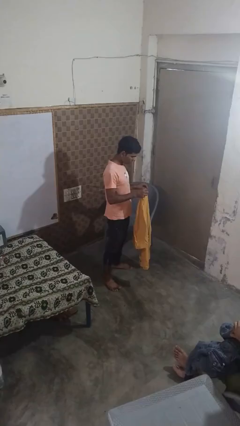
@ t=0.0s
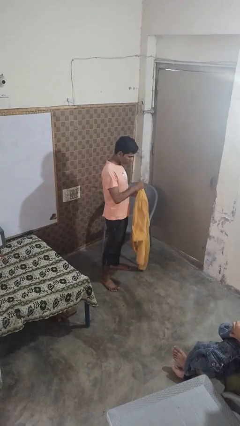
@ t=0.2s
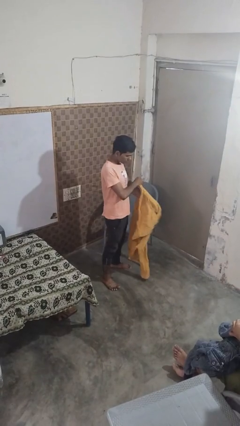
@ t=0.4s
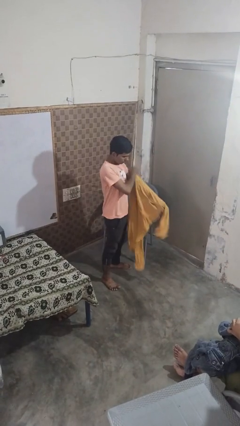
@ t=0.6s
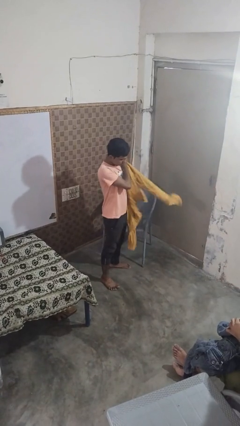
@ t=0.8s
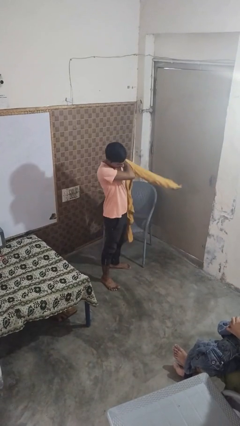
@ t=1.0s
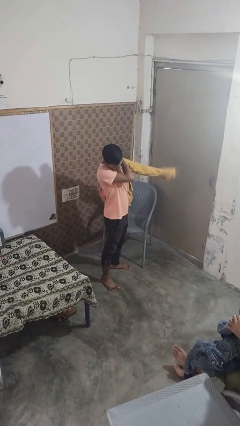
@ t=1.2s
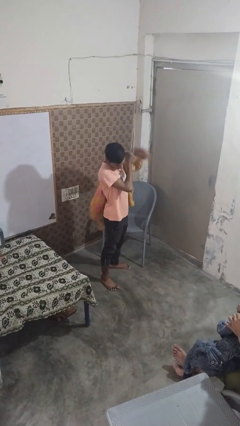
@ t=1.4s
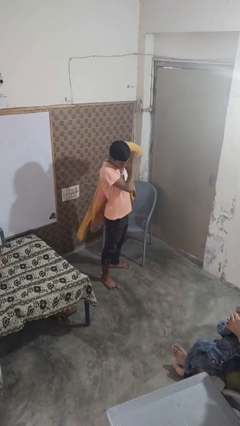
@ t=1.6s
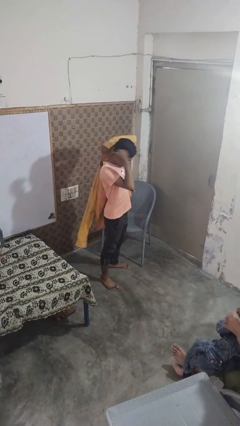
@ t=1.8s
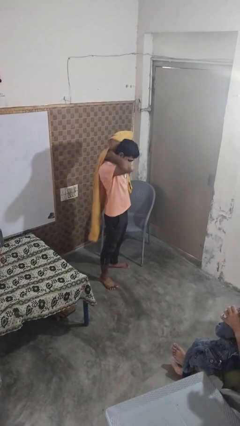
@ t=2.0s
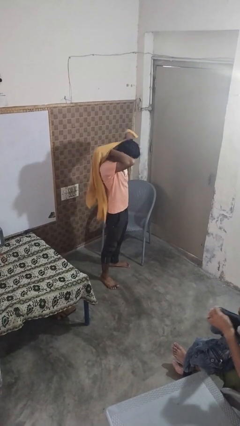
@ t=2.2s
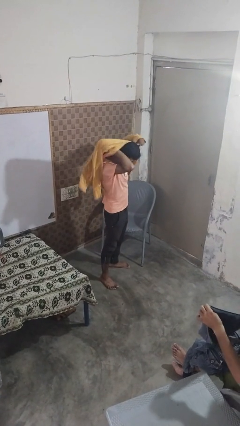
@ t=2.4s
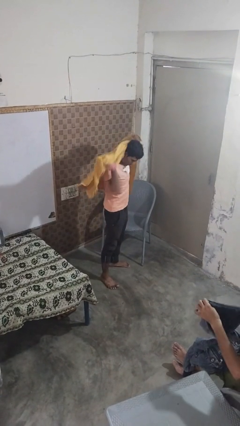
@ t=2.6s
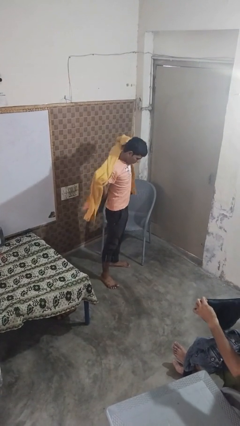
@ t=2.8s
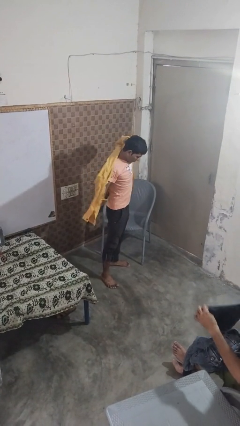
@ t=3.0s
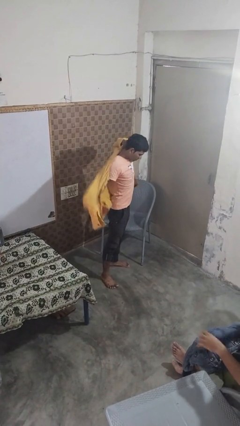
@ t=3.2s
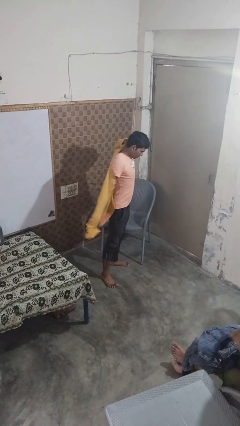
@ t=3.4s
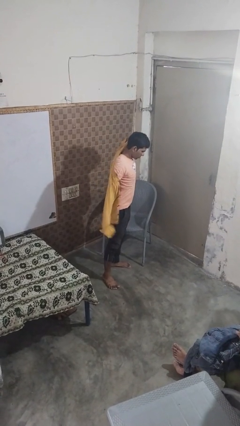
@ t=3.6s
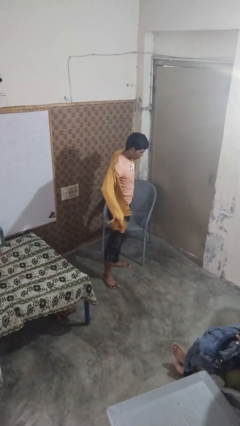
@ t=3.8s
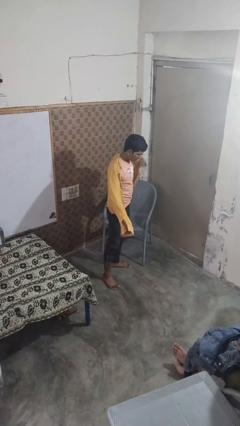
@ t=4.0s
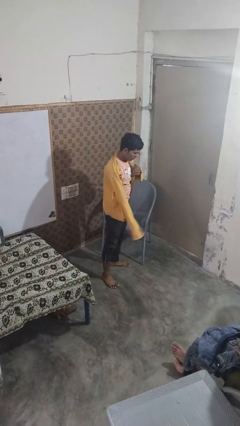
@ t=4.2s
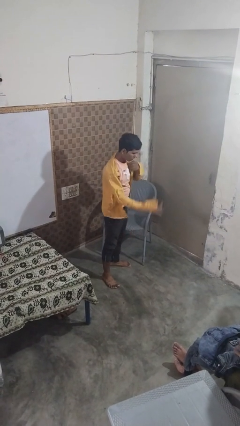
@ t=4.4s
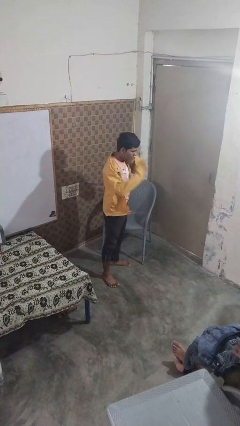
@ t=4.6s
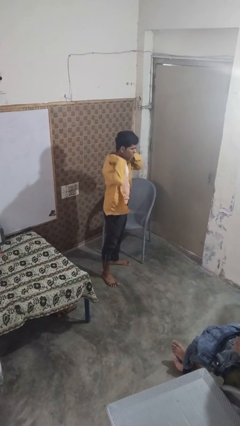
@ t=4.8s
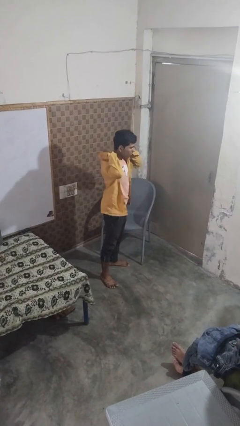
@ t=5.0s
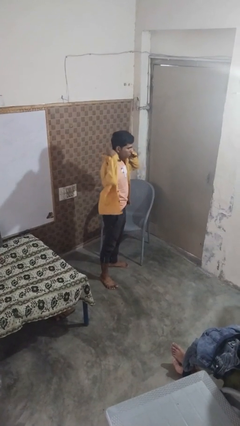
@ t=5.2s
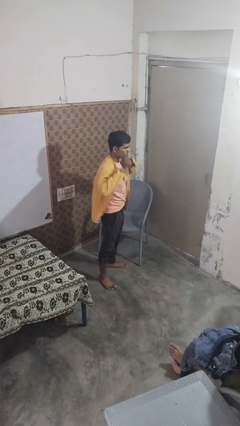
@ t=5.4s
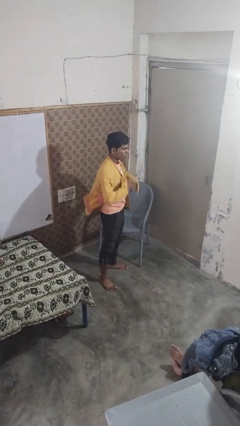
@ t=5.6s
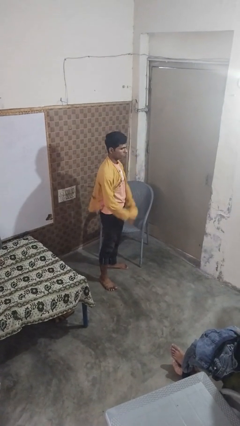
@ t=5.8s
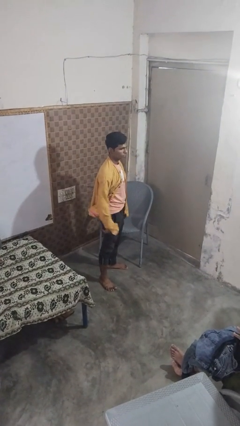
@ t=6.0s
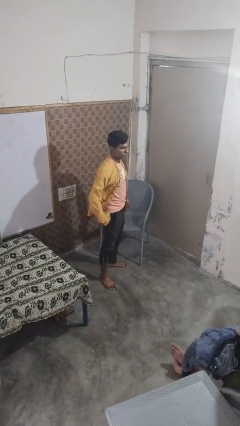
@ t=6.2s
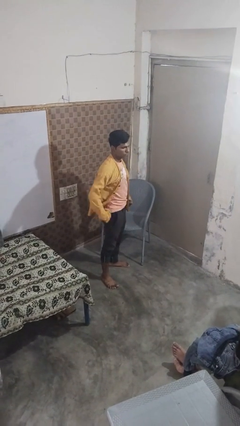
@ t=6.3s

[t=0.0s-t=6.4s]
person puts on shirt

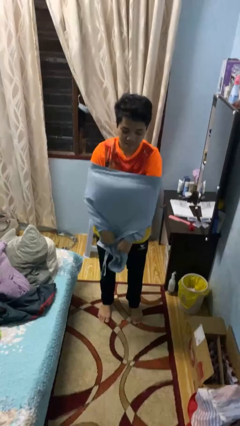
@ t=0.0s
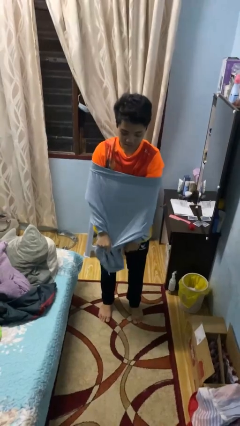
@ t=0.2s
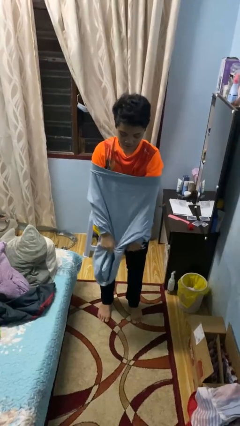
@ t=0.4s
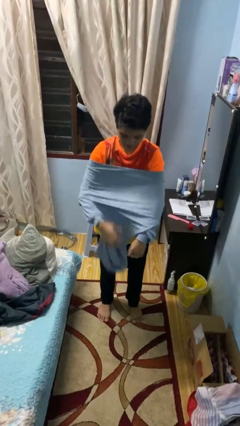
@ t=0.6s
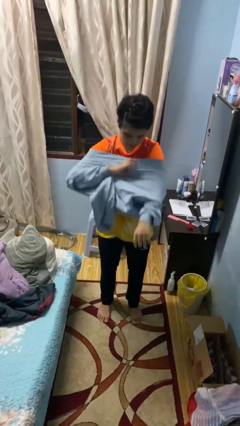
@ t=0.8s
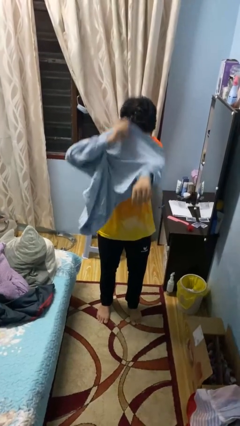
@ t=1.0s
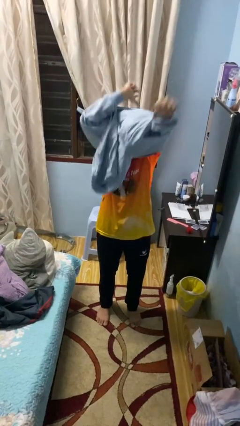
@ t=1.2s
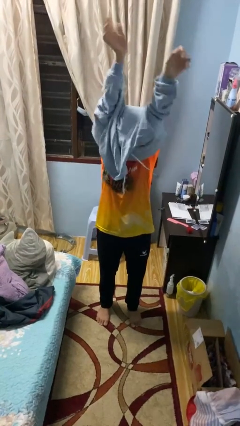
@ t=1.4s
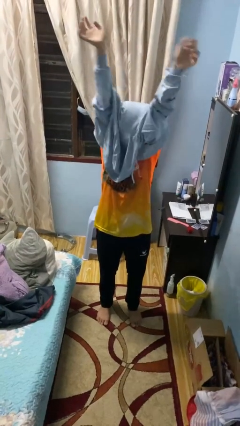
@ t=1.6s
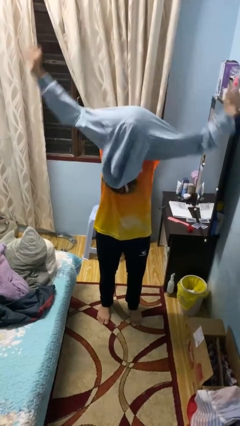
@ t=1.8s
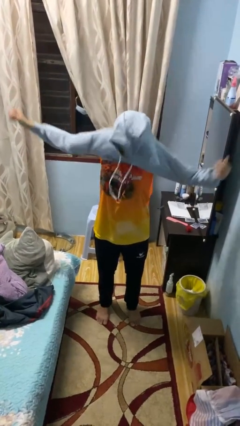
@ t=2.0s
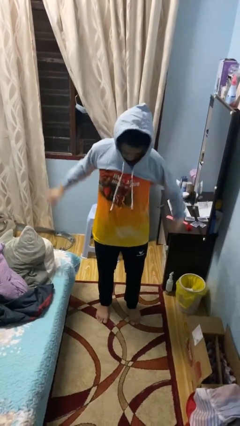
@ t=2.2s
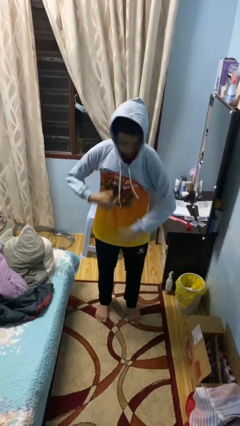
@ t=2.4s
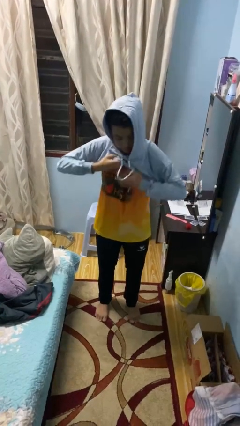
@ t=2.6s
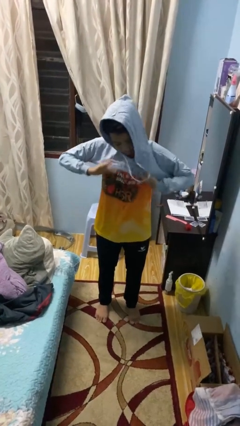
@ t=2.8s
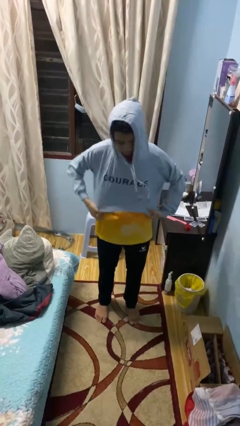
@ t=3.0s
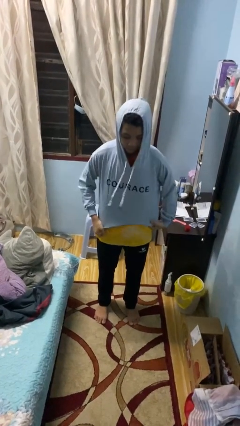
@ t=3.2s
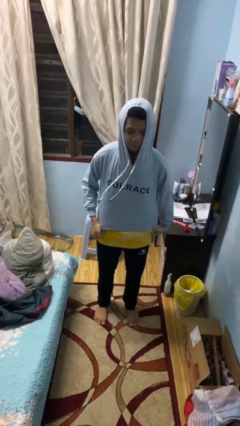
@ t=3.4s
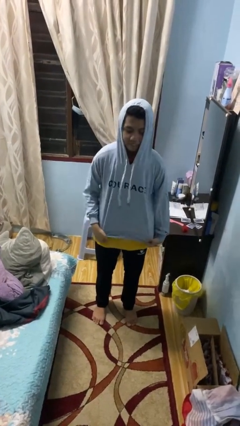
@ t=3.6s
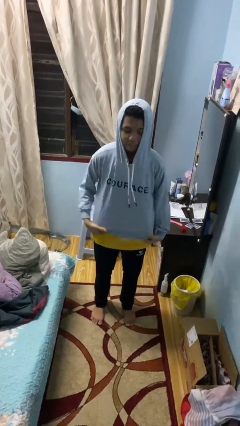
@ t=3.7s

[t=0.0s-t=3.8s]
person puts on hoodie

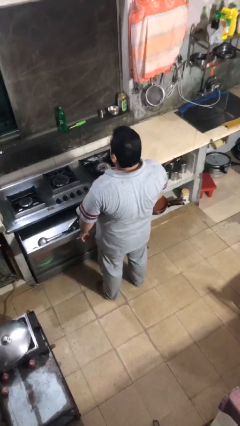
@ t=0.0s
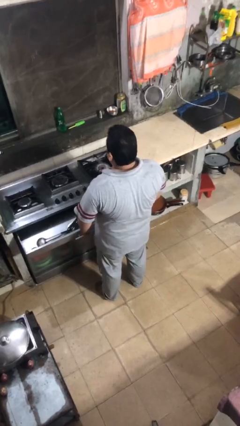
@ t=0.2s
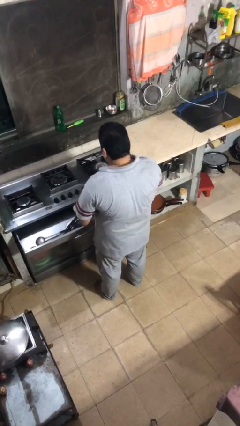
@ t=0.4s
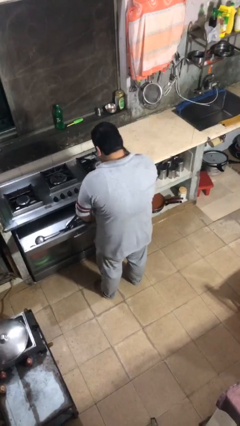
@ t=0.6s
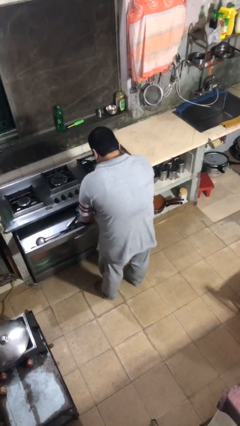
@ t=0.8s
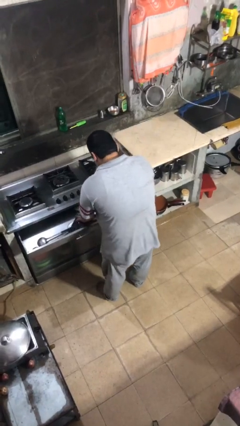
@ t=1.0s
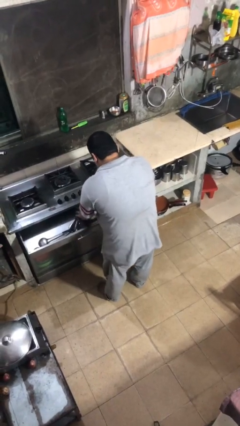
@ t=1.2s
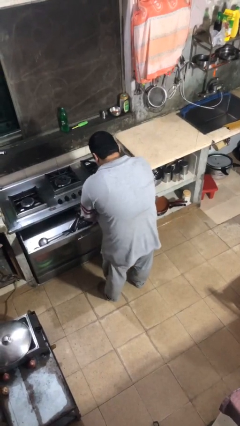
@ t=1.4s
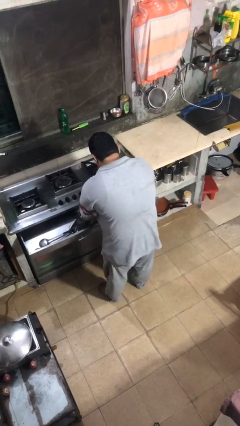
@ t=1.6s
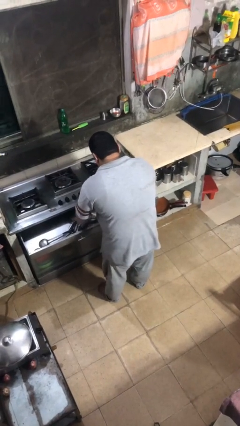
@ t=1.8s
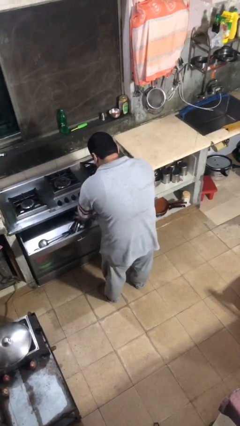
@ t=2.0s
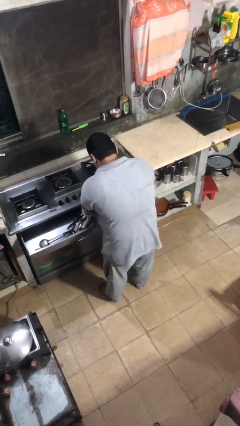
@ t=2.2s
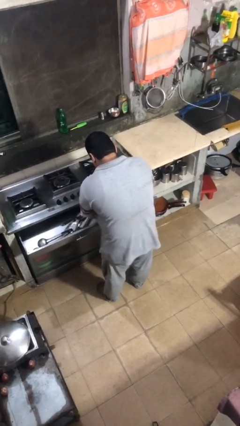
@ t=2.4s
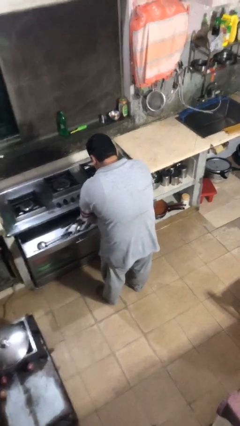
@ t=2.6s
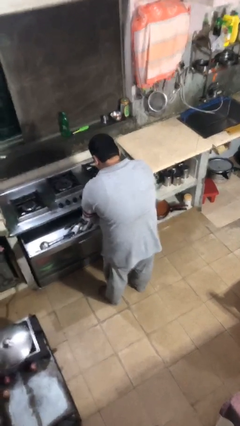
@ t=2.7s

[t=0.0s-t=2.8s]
person searches in kitchen drawer

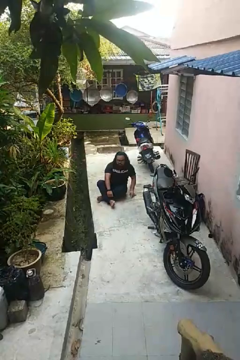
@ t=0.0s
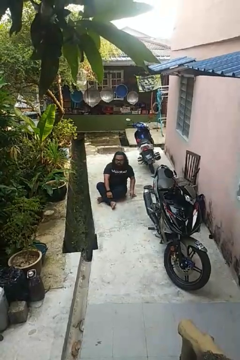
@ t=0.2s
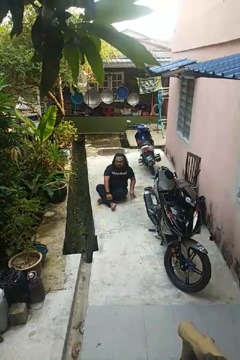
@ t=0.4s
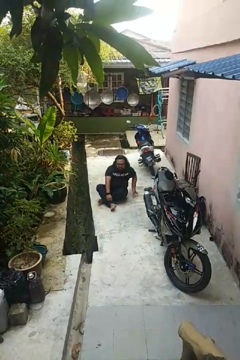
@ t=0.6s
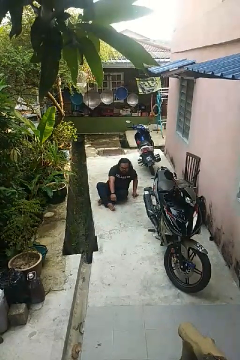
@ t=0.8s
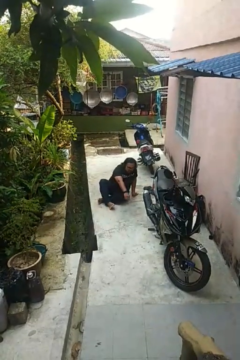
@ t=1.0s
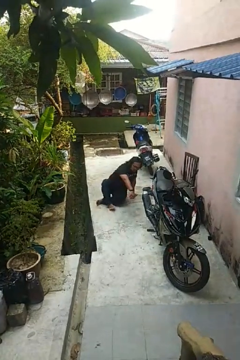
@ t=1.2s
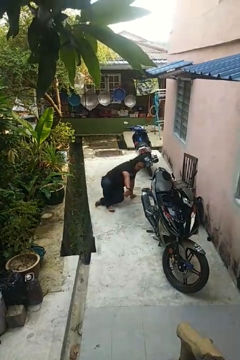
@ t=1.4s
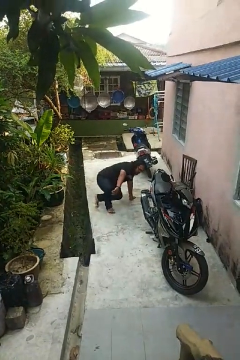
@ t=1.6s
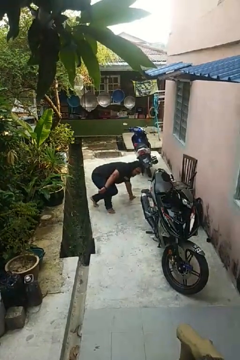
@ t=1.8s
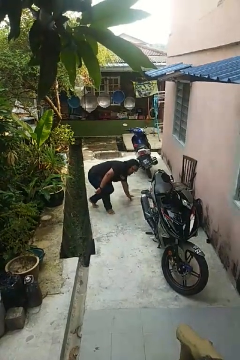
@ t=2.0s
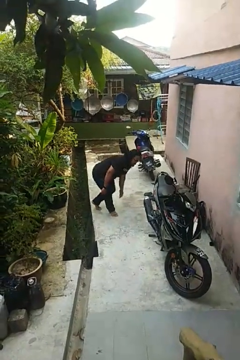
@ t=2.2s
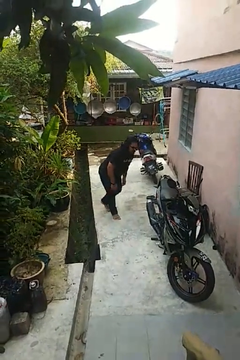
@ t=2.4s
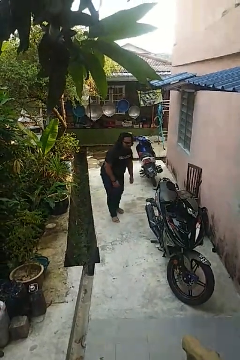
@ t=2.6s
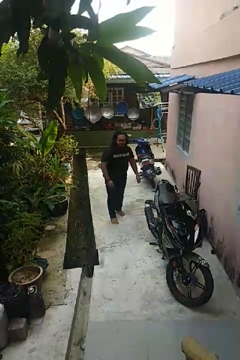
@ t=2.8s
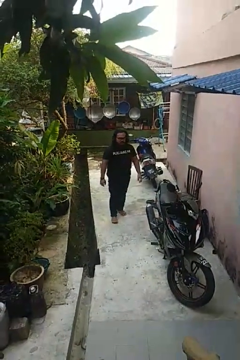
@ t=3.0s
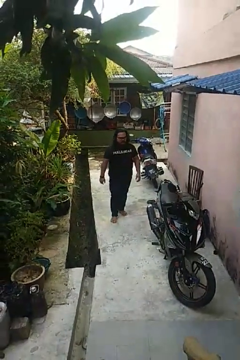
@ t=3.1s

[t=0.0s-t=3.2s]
person stands up from floor

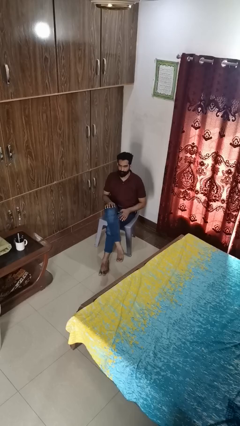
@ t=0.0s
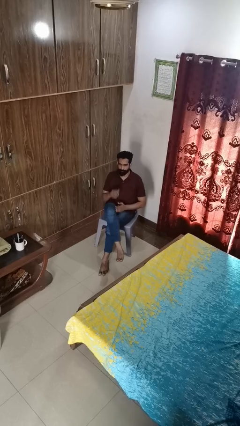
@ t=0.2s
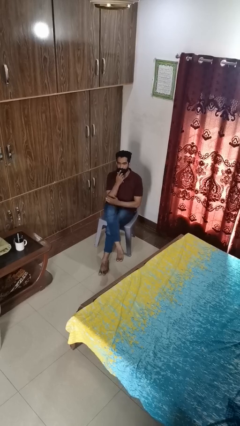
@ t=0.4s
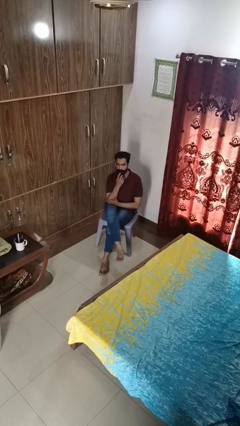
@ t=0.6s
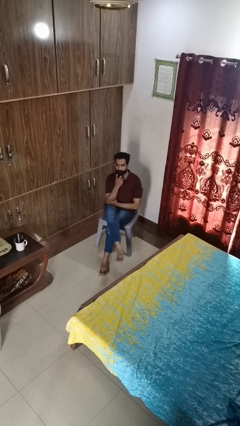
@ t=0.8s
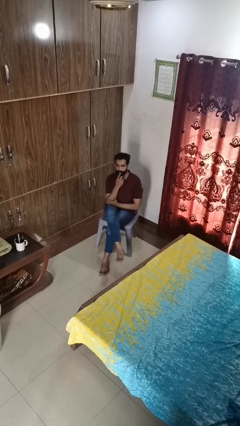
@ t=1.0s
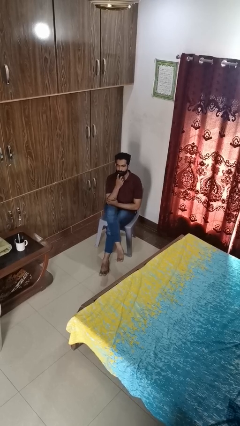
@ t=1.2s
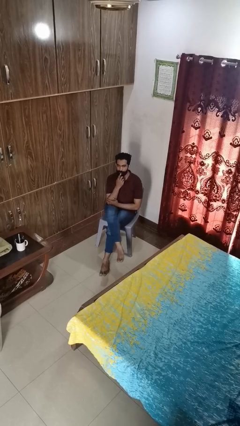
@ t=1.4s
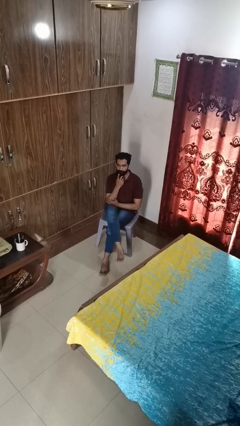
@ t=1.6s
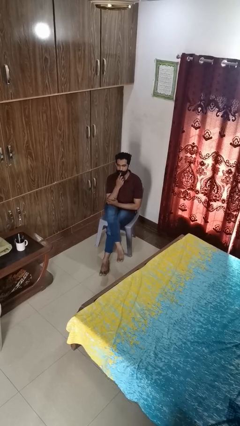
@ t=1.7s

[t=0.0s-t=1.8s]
person strokes chin
